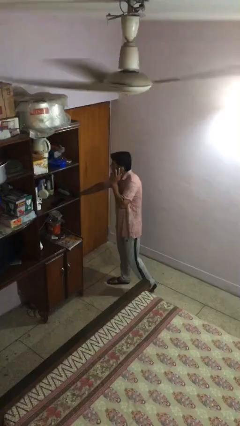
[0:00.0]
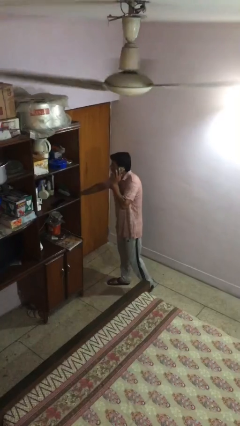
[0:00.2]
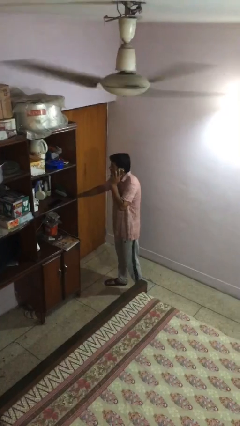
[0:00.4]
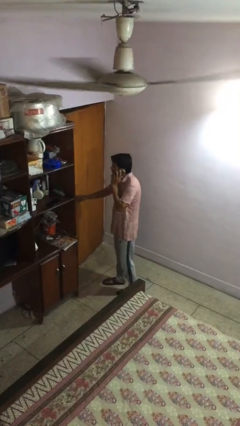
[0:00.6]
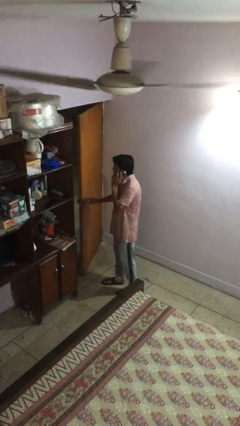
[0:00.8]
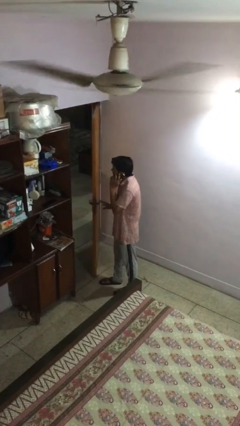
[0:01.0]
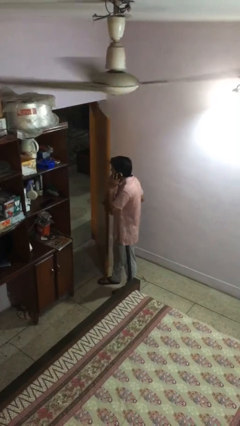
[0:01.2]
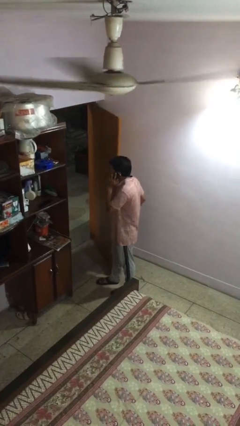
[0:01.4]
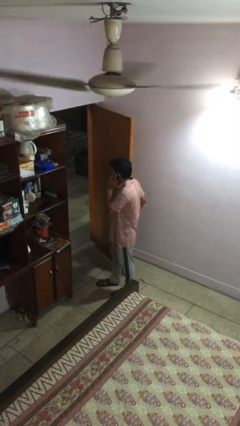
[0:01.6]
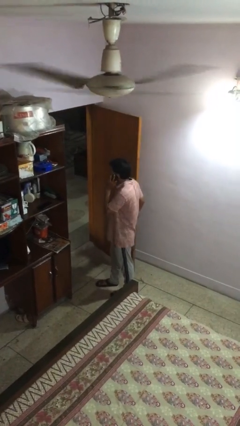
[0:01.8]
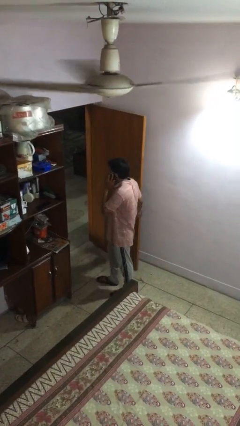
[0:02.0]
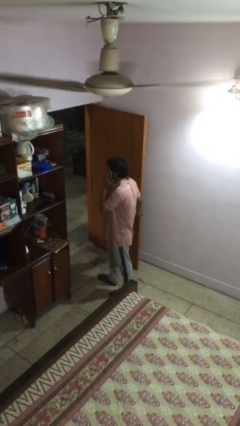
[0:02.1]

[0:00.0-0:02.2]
person opens facility door

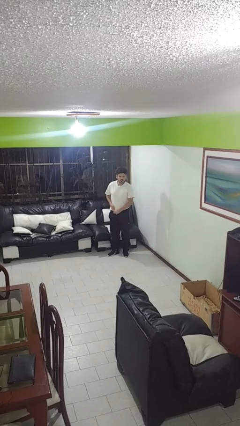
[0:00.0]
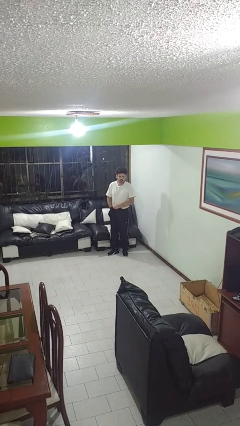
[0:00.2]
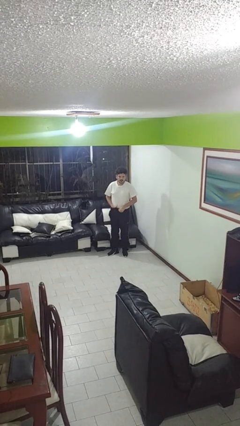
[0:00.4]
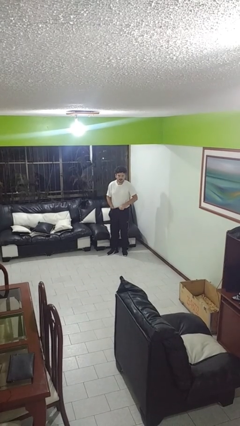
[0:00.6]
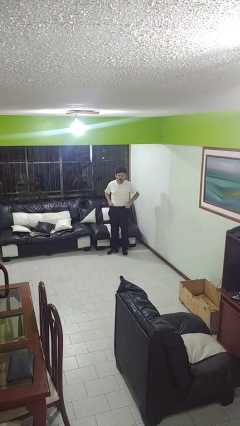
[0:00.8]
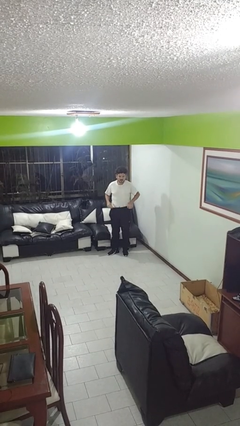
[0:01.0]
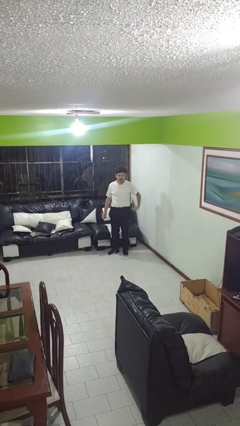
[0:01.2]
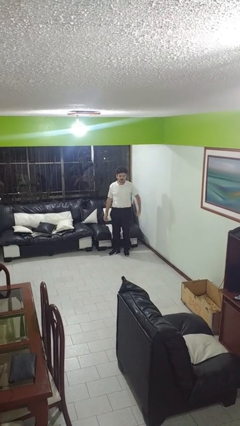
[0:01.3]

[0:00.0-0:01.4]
person tucks in shirt

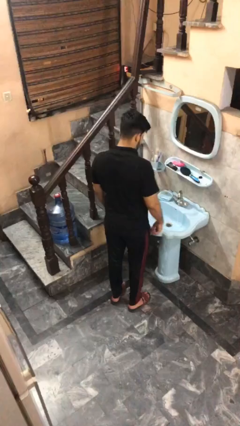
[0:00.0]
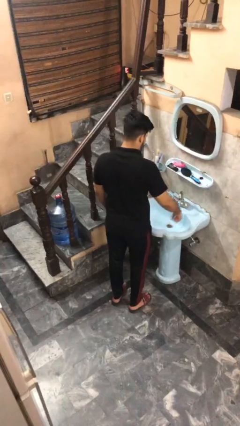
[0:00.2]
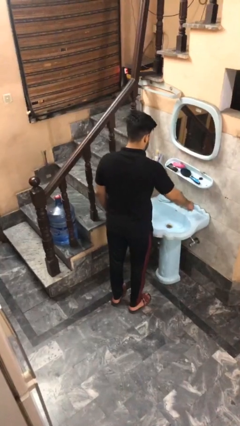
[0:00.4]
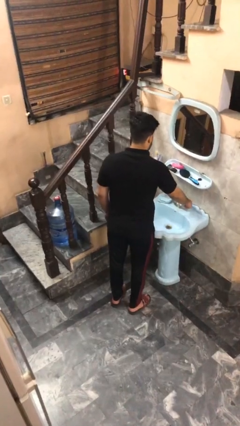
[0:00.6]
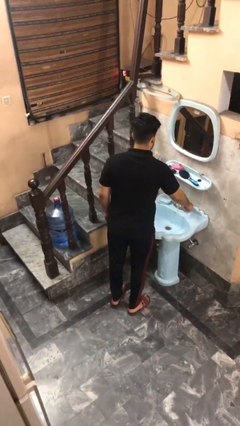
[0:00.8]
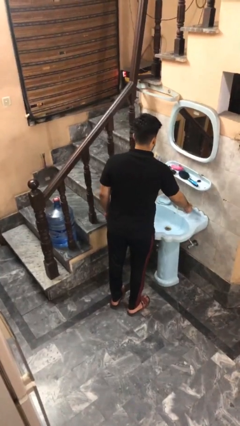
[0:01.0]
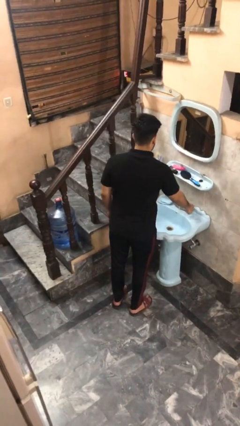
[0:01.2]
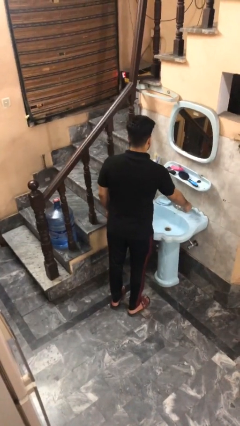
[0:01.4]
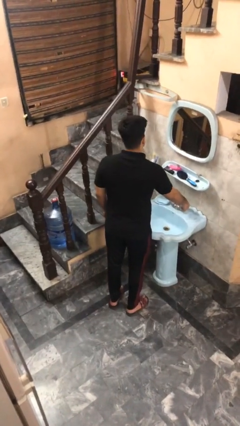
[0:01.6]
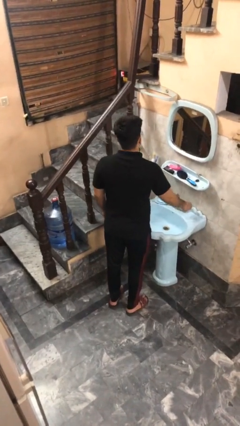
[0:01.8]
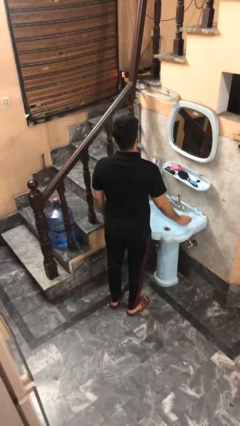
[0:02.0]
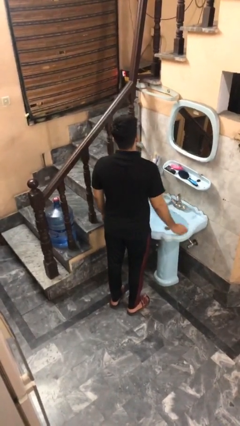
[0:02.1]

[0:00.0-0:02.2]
person turns off faucet

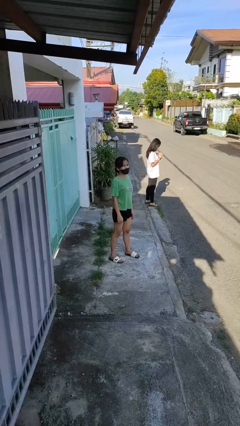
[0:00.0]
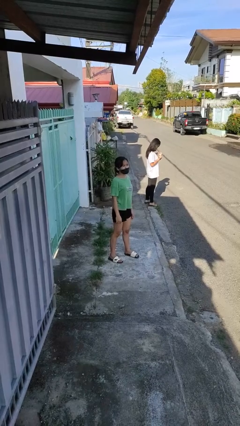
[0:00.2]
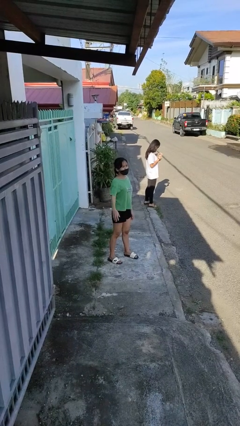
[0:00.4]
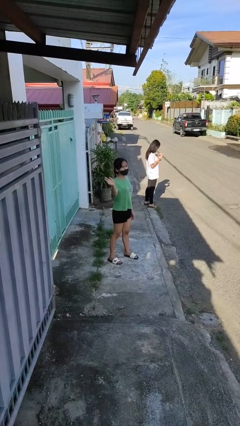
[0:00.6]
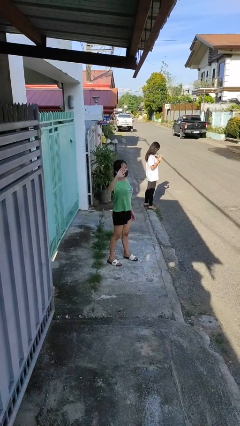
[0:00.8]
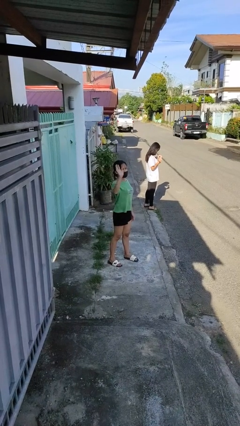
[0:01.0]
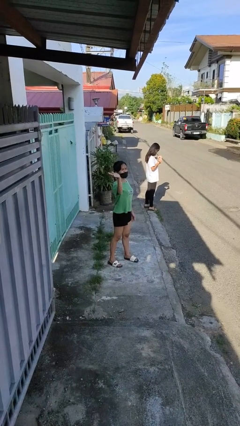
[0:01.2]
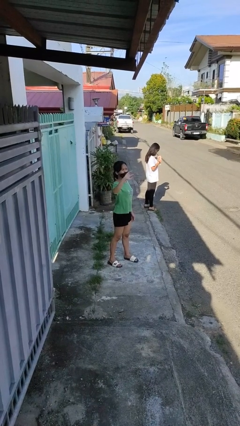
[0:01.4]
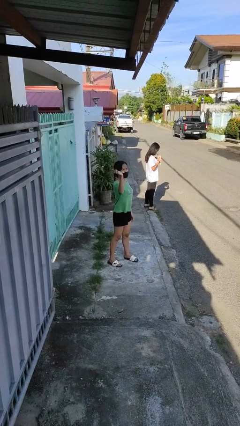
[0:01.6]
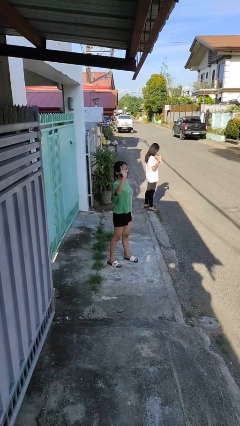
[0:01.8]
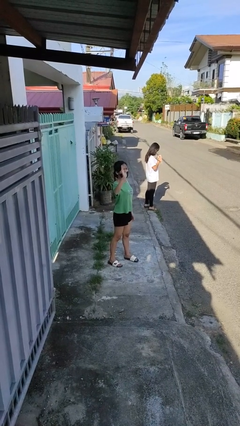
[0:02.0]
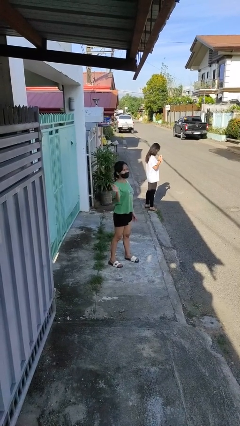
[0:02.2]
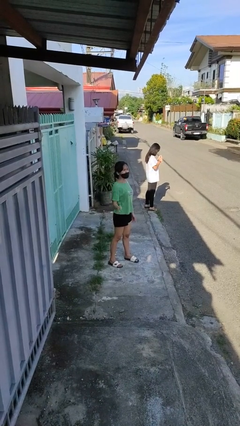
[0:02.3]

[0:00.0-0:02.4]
person waves at person

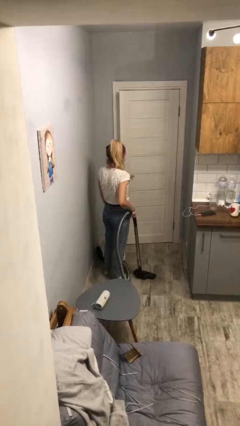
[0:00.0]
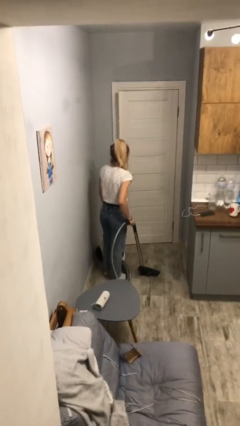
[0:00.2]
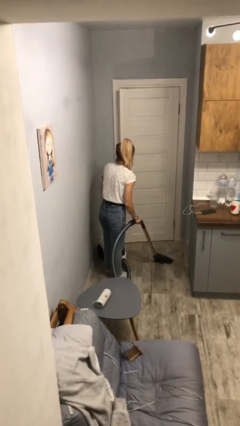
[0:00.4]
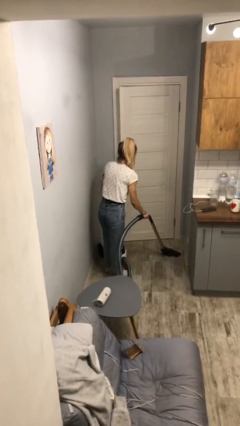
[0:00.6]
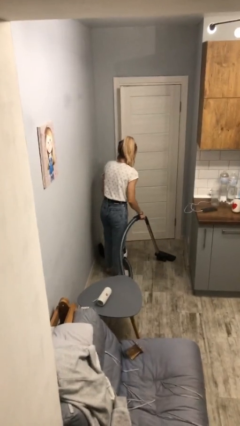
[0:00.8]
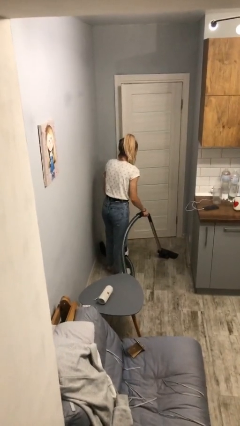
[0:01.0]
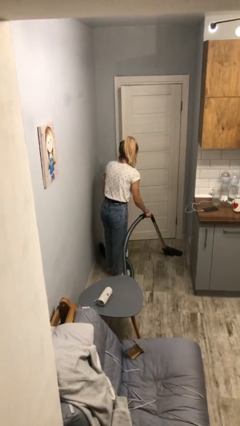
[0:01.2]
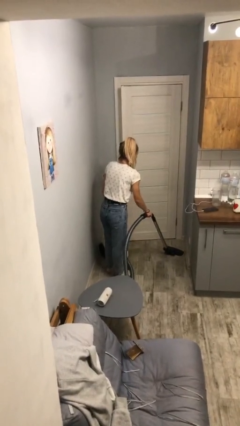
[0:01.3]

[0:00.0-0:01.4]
person vacuums carpet

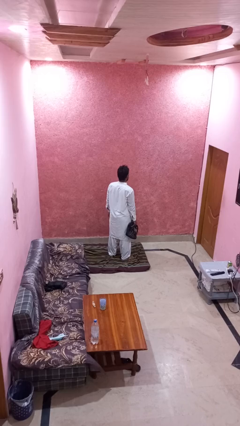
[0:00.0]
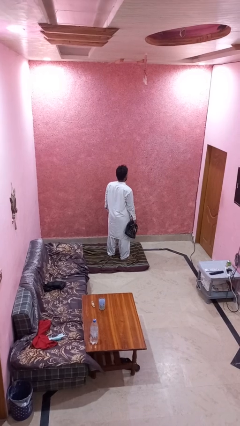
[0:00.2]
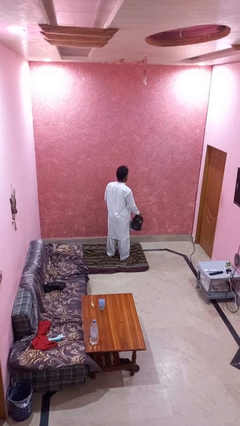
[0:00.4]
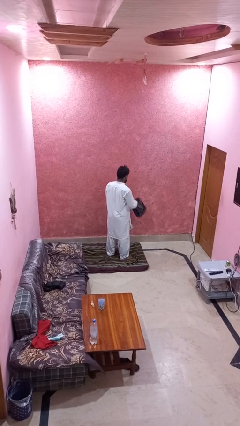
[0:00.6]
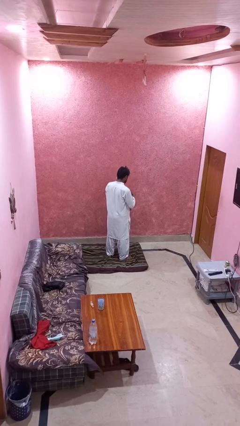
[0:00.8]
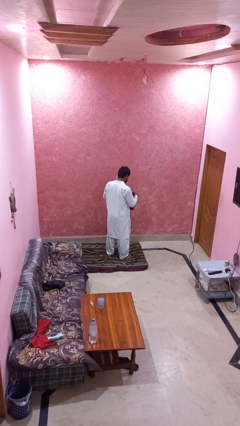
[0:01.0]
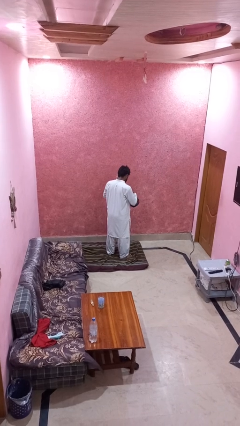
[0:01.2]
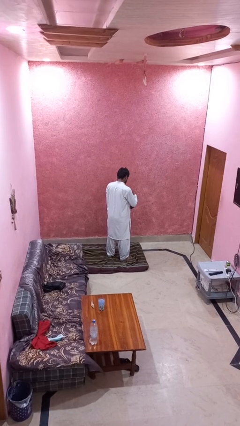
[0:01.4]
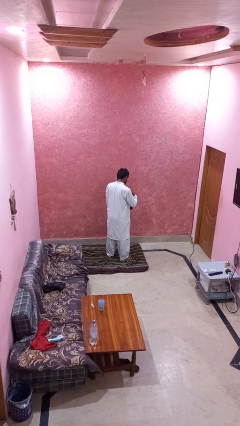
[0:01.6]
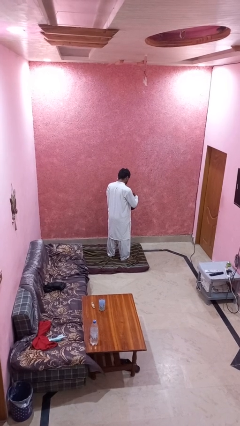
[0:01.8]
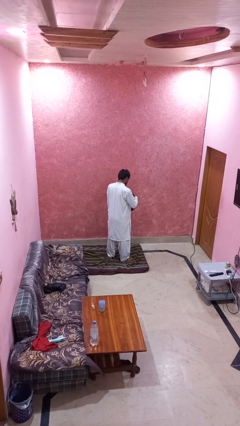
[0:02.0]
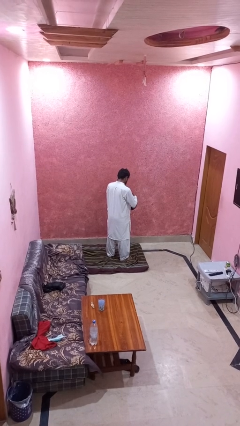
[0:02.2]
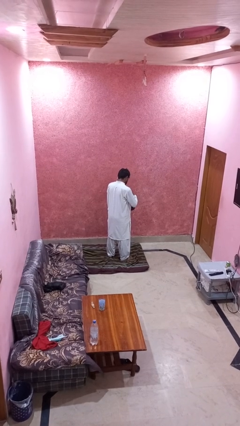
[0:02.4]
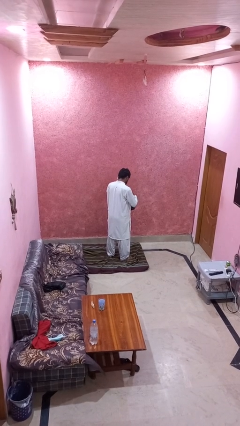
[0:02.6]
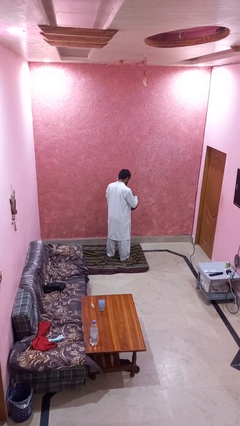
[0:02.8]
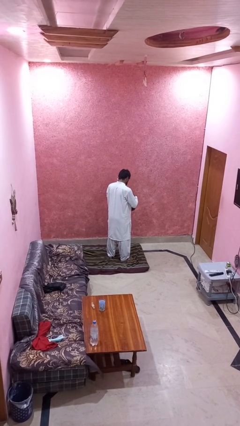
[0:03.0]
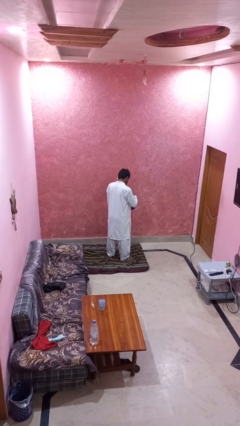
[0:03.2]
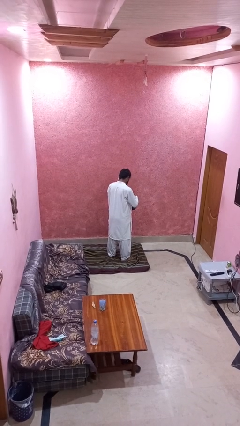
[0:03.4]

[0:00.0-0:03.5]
person searches in purse

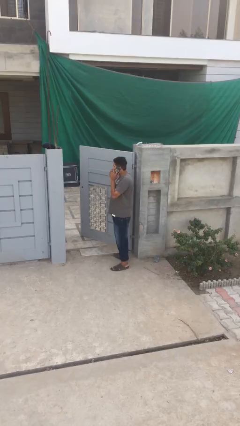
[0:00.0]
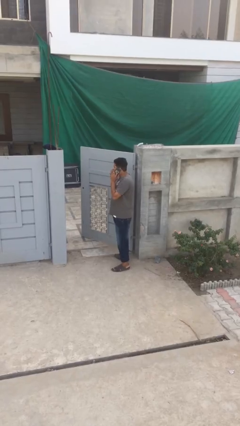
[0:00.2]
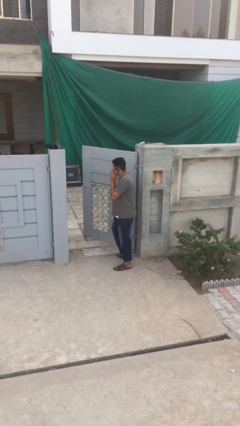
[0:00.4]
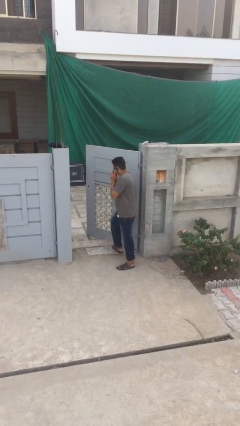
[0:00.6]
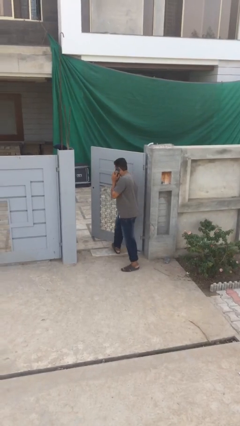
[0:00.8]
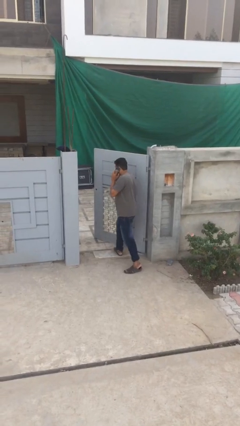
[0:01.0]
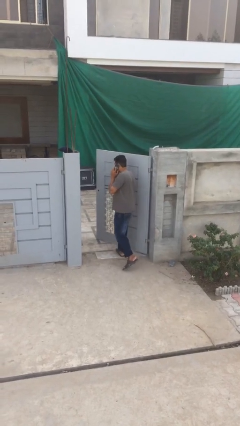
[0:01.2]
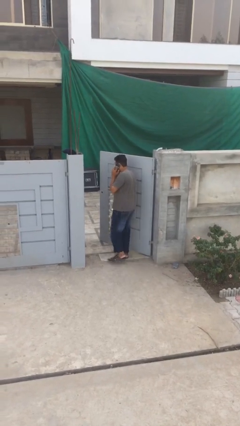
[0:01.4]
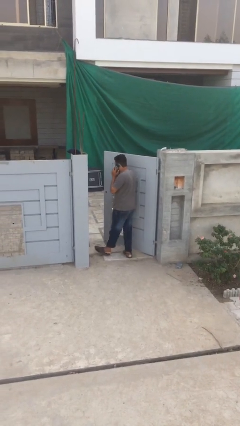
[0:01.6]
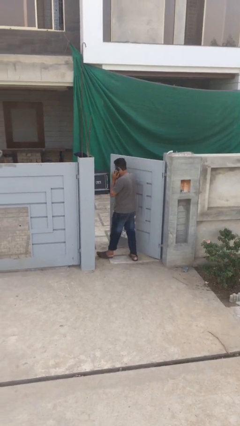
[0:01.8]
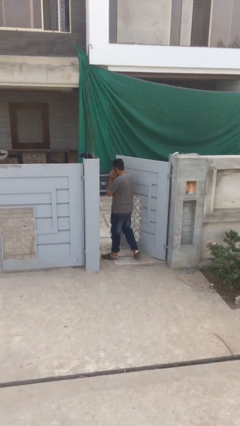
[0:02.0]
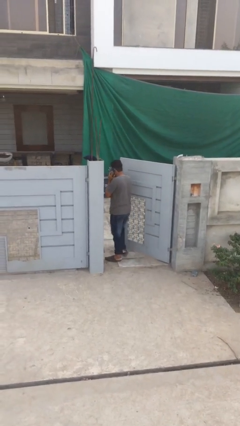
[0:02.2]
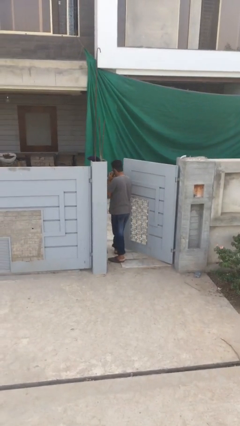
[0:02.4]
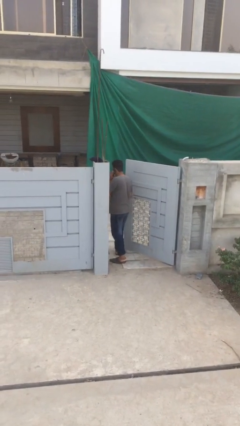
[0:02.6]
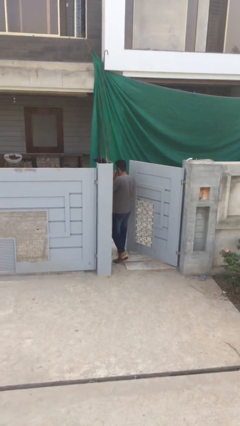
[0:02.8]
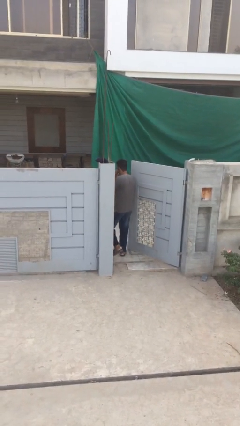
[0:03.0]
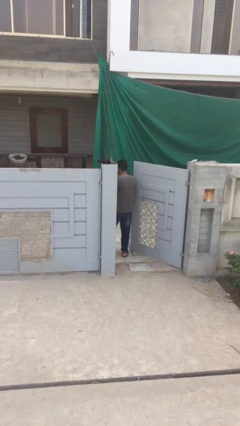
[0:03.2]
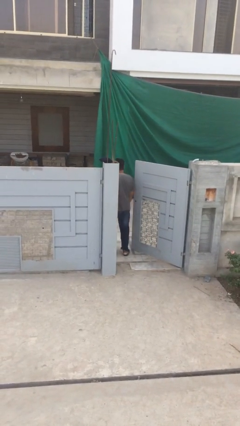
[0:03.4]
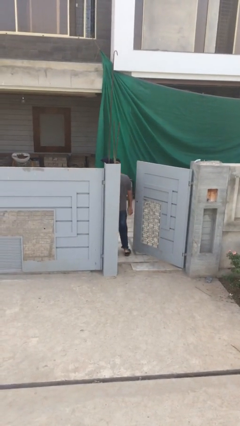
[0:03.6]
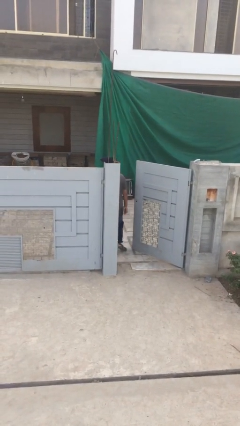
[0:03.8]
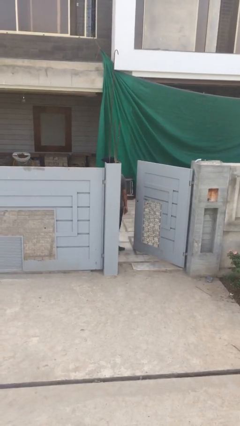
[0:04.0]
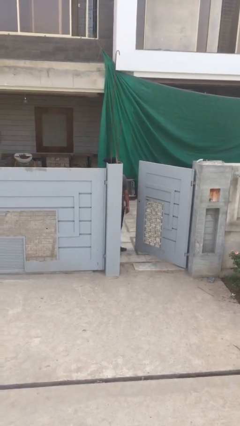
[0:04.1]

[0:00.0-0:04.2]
person exits scene through structure
